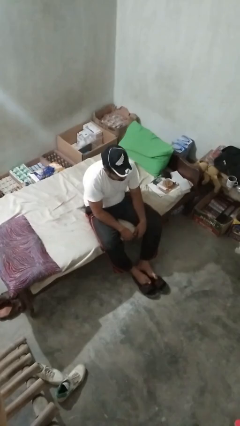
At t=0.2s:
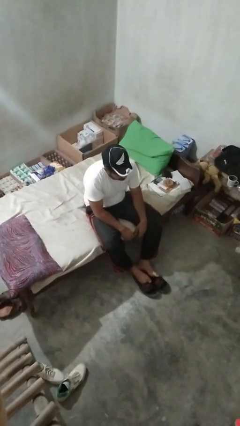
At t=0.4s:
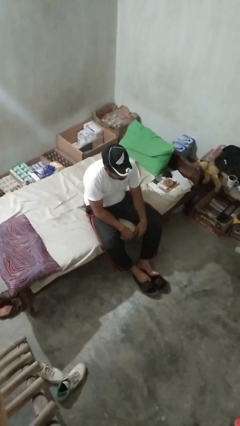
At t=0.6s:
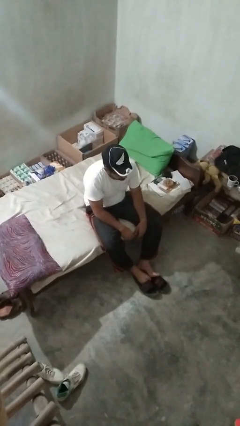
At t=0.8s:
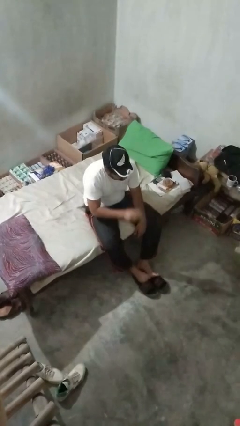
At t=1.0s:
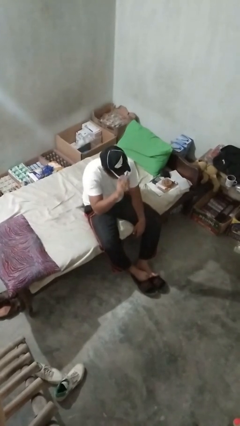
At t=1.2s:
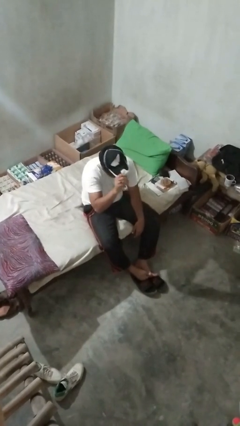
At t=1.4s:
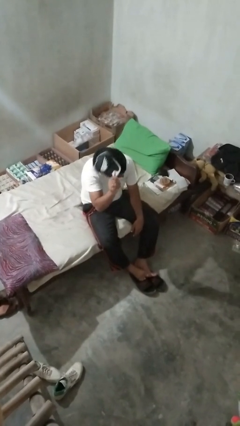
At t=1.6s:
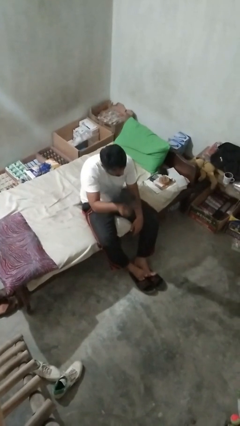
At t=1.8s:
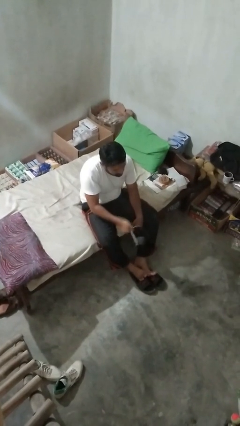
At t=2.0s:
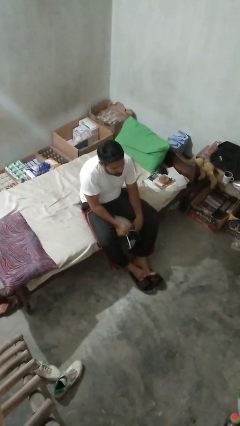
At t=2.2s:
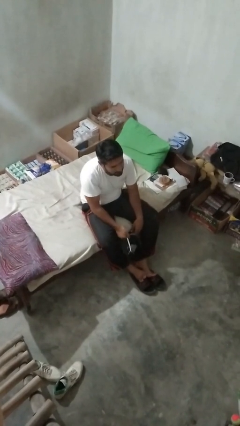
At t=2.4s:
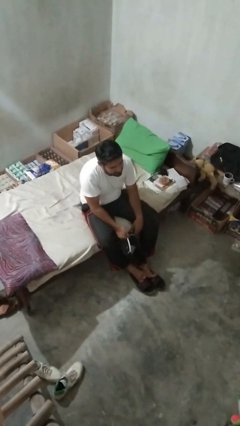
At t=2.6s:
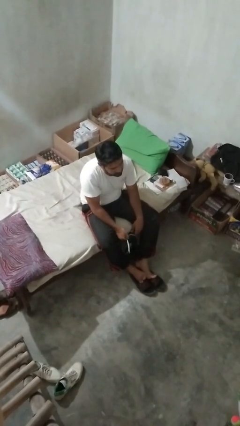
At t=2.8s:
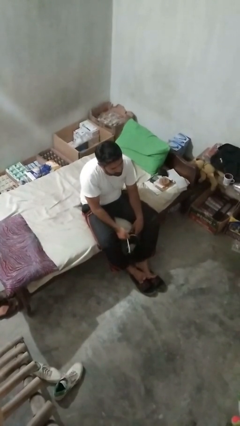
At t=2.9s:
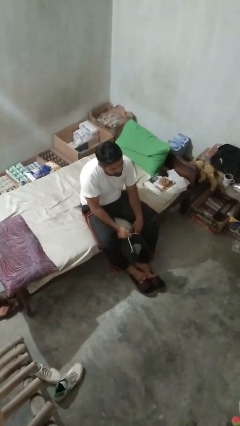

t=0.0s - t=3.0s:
person takes off hat

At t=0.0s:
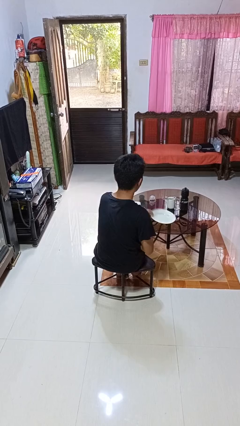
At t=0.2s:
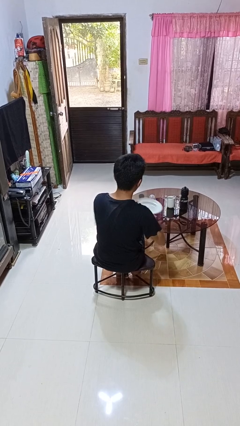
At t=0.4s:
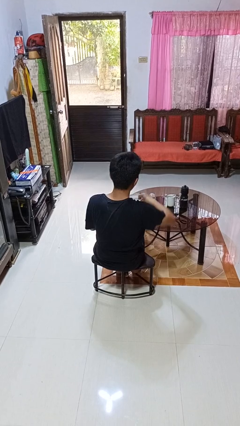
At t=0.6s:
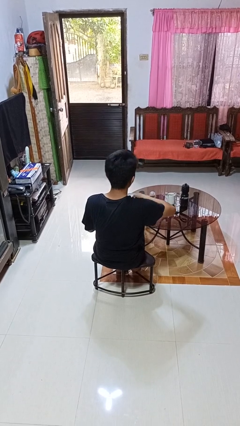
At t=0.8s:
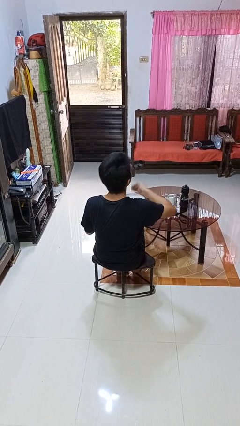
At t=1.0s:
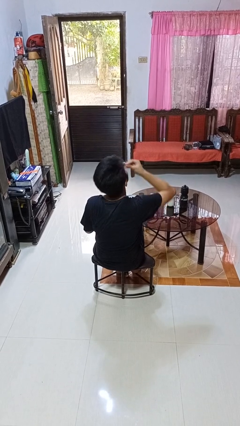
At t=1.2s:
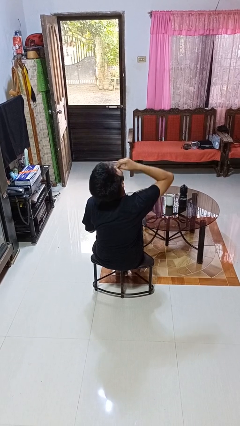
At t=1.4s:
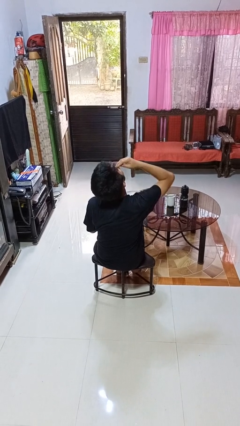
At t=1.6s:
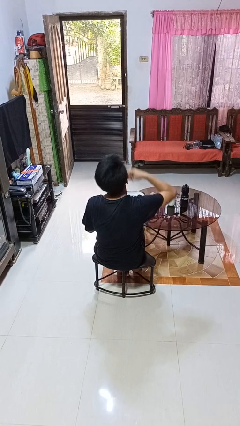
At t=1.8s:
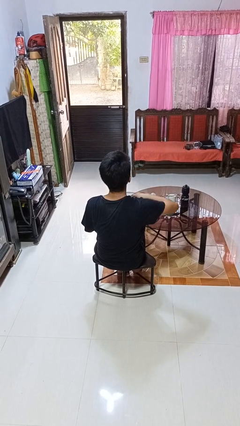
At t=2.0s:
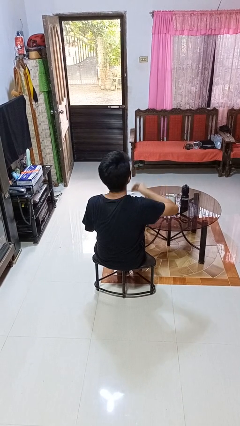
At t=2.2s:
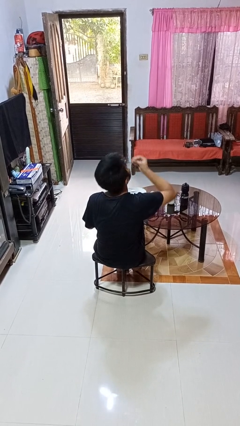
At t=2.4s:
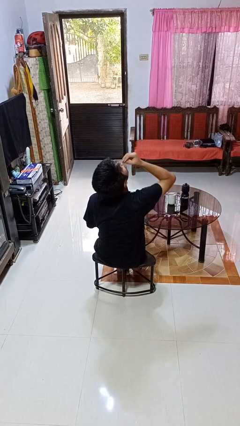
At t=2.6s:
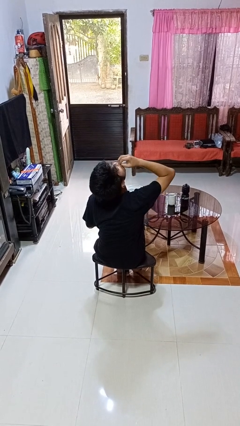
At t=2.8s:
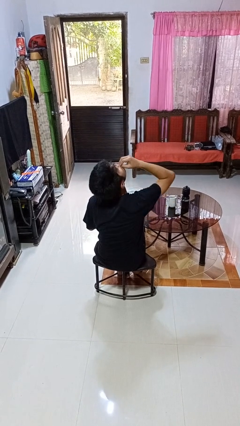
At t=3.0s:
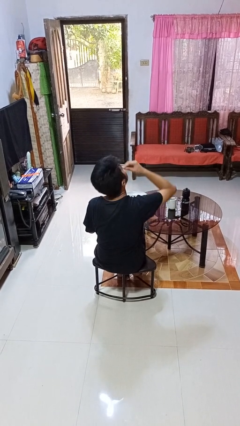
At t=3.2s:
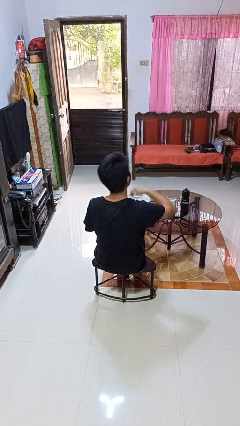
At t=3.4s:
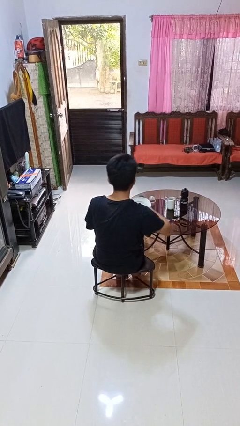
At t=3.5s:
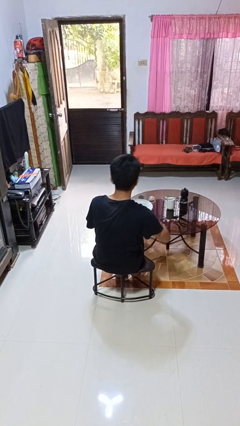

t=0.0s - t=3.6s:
person eats with hands

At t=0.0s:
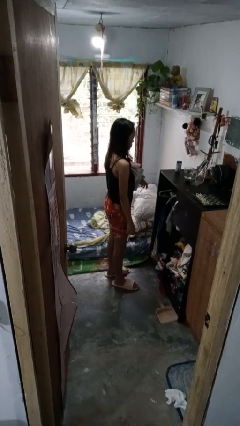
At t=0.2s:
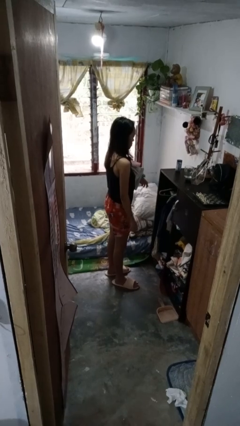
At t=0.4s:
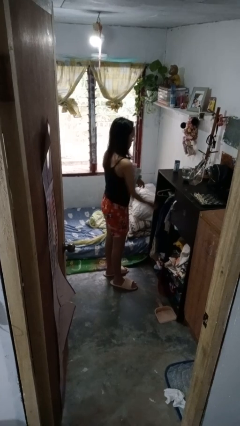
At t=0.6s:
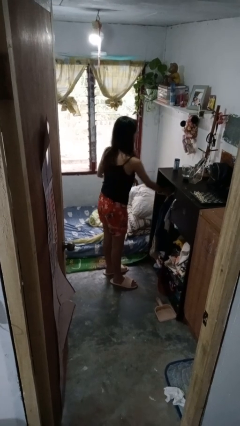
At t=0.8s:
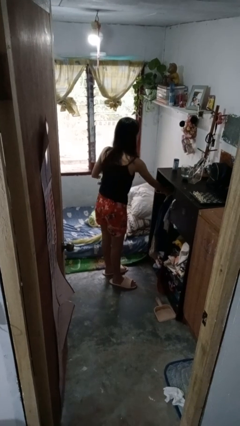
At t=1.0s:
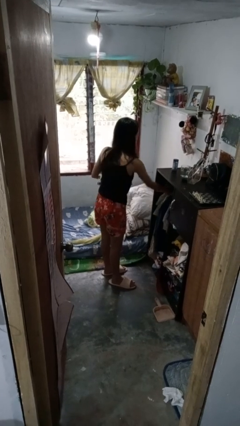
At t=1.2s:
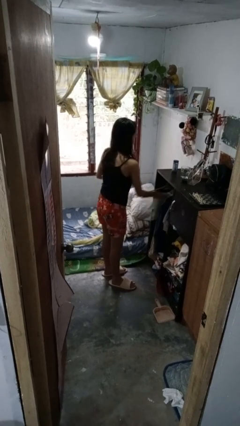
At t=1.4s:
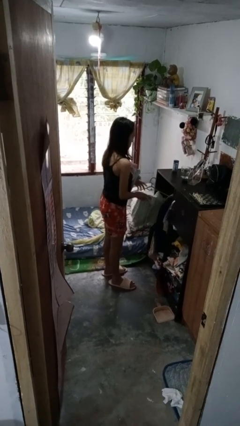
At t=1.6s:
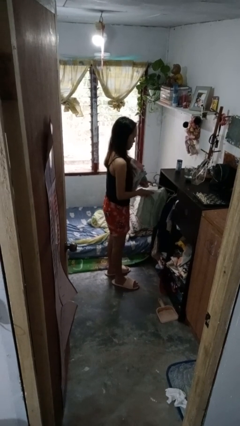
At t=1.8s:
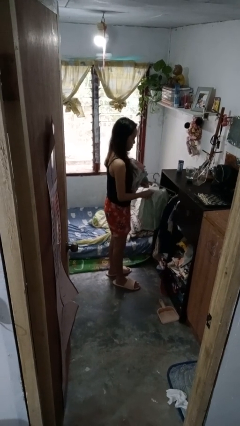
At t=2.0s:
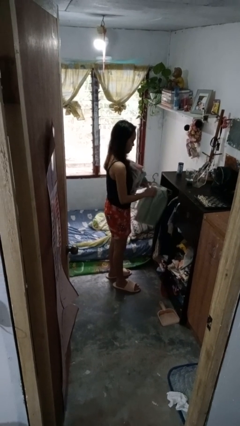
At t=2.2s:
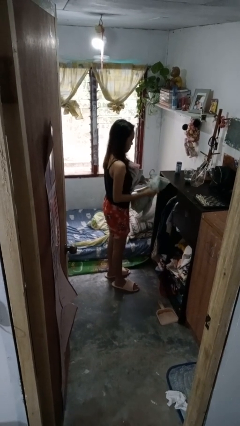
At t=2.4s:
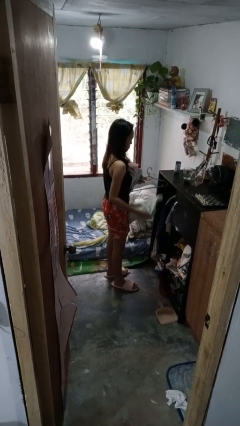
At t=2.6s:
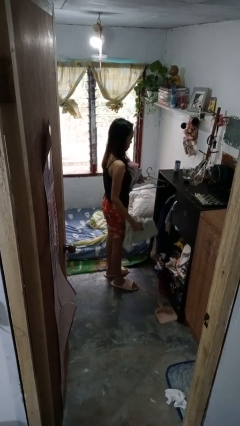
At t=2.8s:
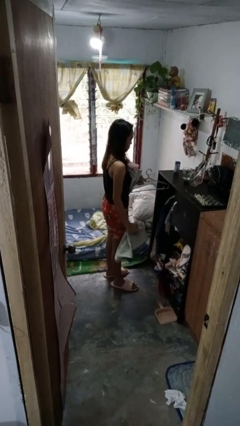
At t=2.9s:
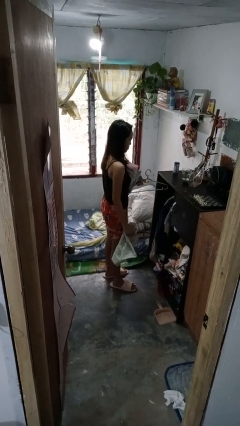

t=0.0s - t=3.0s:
person takes clothes from closet

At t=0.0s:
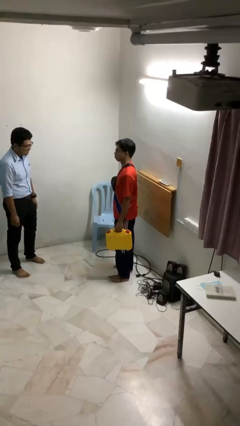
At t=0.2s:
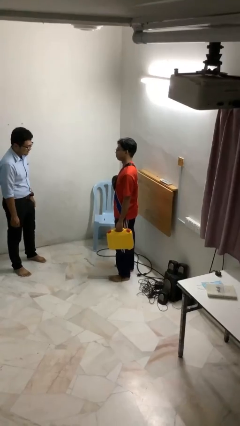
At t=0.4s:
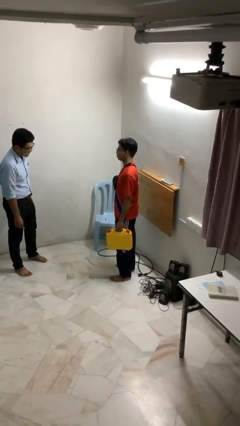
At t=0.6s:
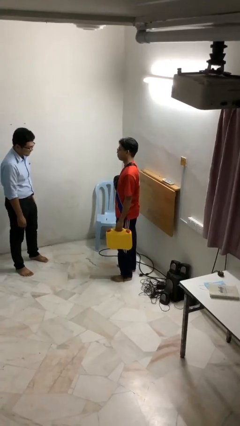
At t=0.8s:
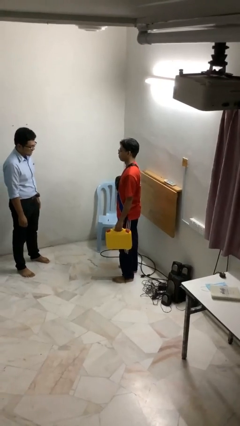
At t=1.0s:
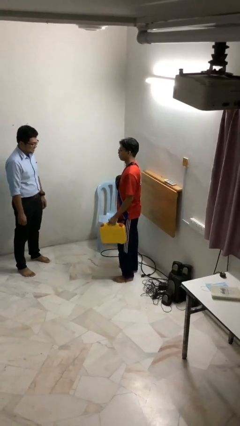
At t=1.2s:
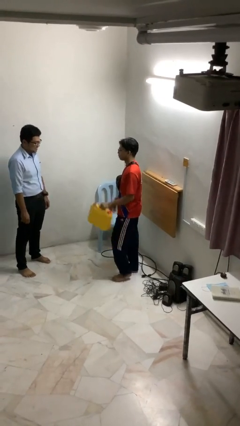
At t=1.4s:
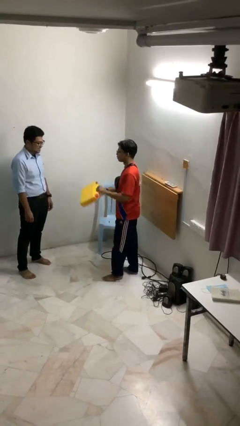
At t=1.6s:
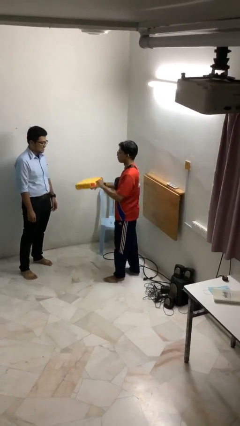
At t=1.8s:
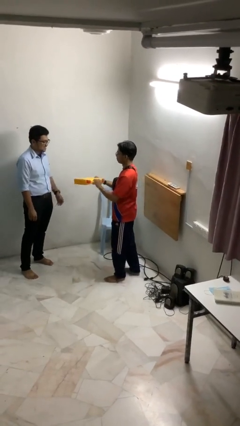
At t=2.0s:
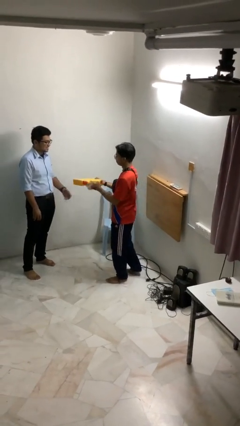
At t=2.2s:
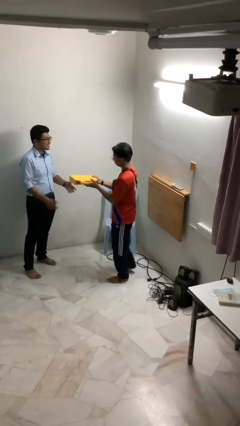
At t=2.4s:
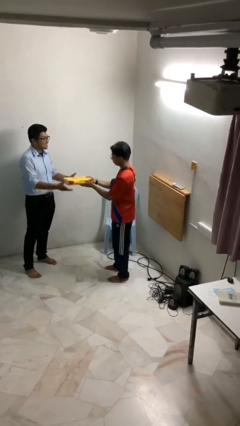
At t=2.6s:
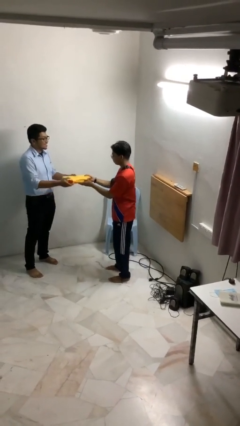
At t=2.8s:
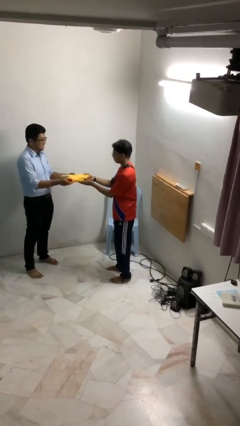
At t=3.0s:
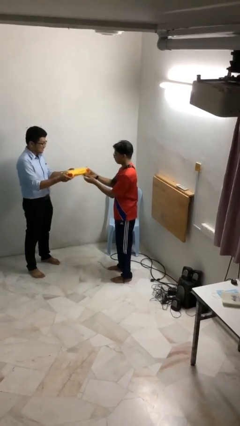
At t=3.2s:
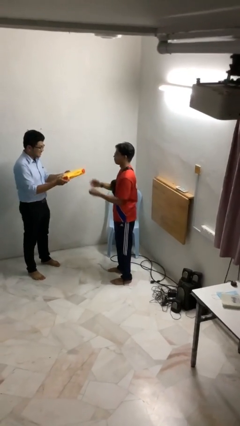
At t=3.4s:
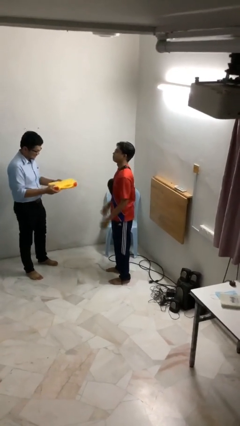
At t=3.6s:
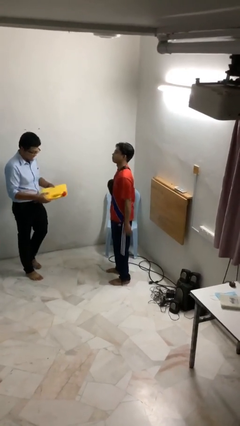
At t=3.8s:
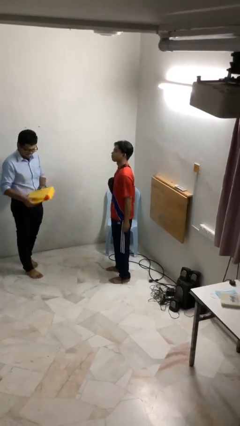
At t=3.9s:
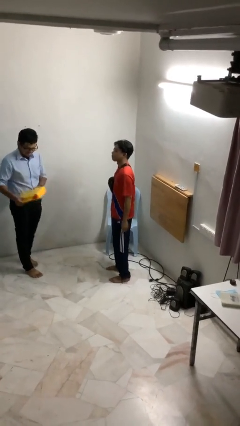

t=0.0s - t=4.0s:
person transfers object to person

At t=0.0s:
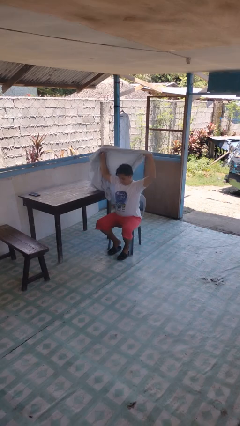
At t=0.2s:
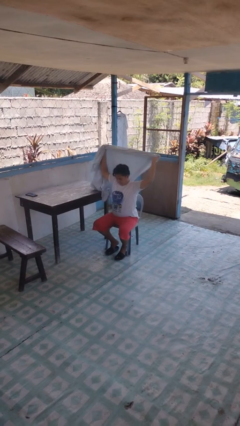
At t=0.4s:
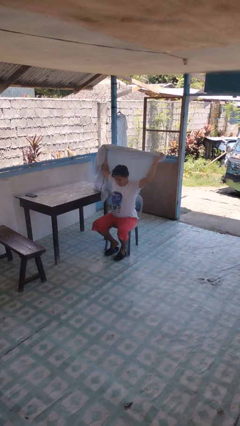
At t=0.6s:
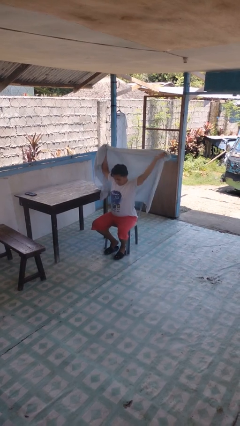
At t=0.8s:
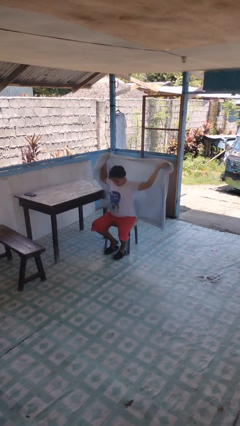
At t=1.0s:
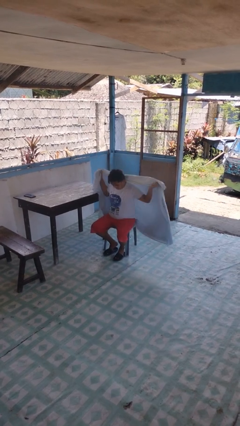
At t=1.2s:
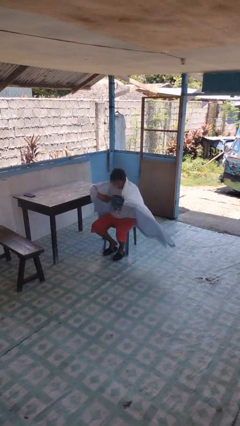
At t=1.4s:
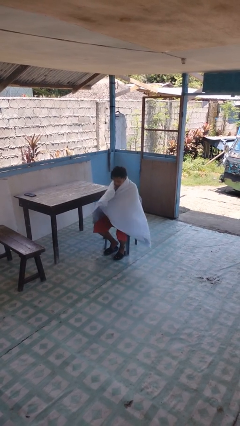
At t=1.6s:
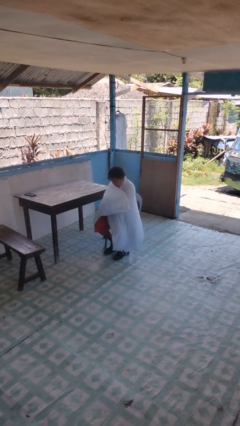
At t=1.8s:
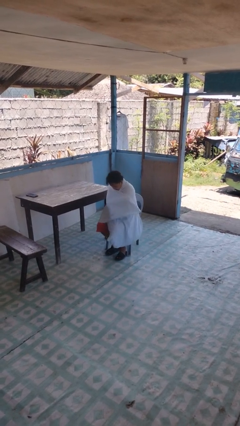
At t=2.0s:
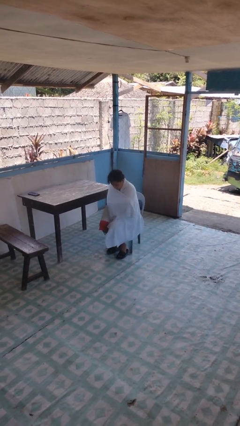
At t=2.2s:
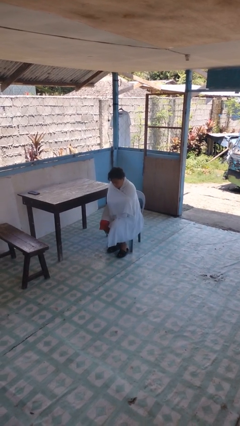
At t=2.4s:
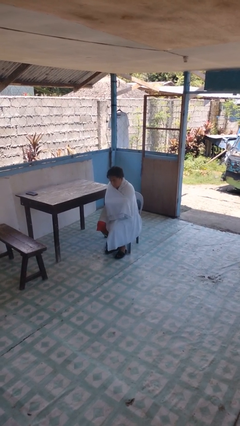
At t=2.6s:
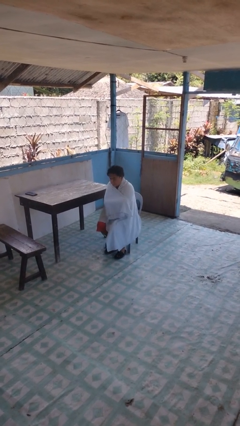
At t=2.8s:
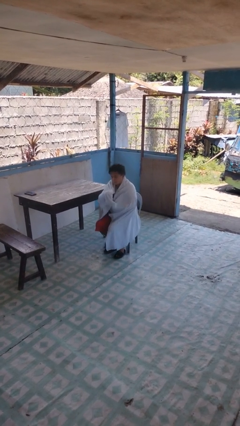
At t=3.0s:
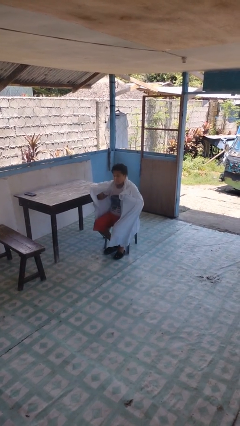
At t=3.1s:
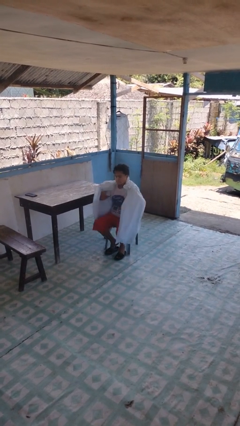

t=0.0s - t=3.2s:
person covers with blanket

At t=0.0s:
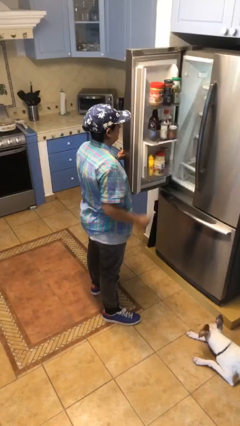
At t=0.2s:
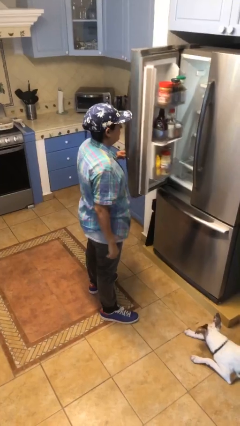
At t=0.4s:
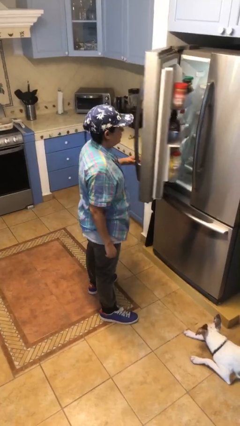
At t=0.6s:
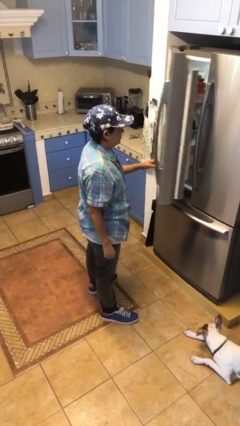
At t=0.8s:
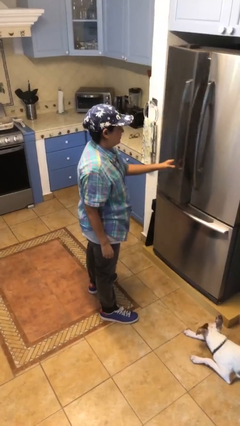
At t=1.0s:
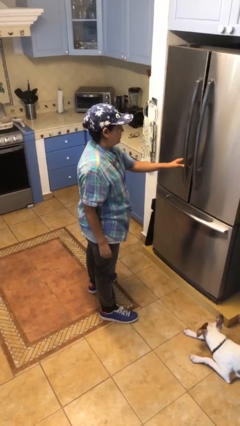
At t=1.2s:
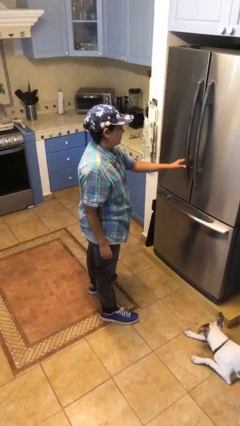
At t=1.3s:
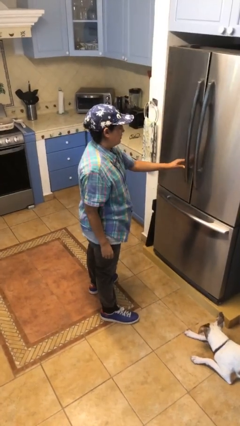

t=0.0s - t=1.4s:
person closes refrigerator
